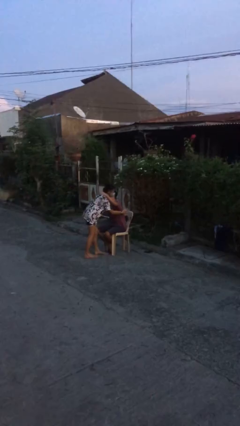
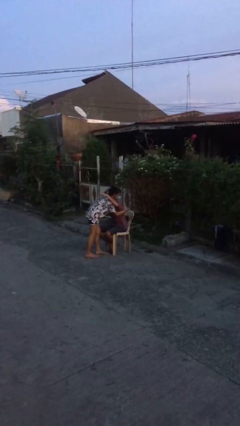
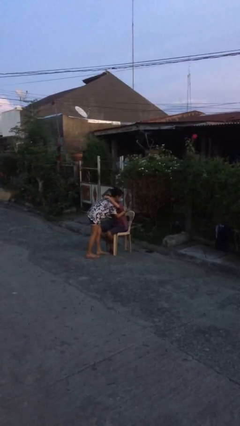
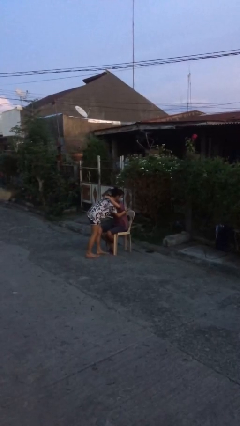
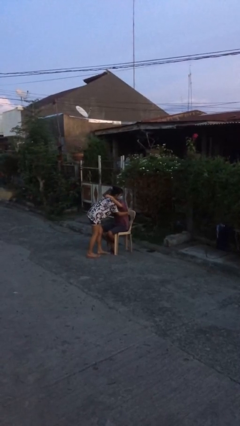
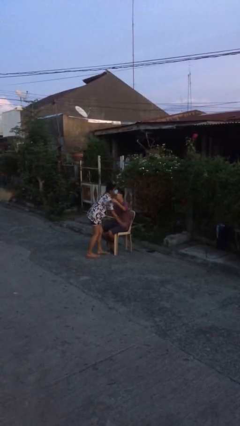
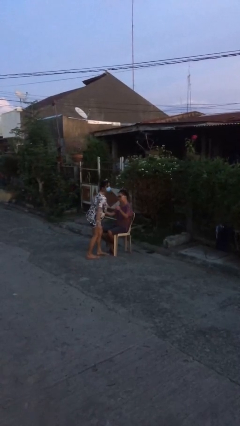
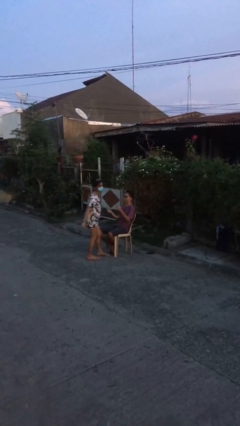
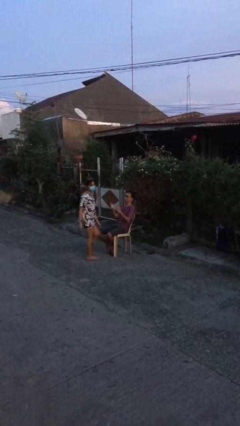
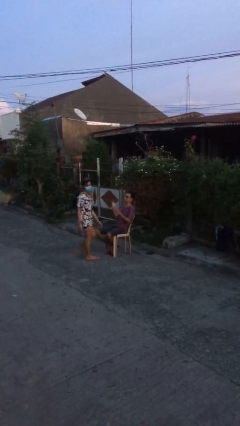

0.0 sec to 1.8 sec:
person embraces person

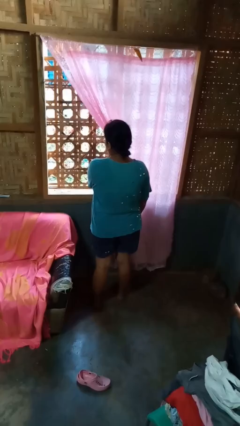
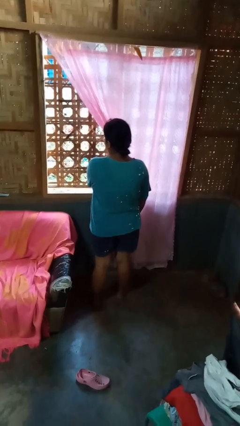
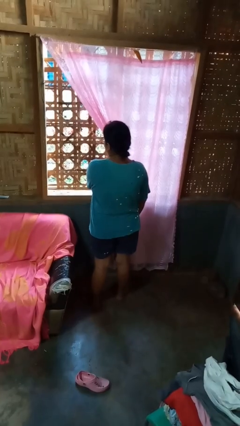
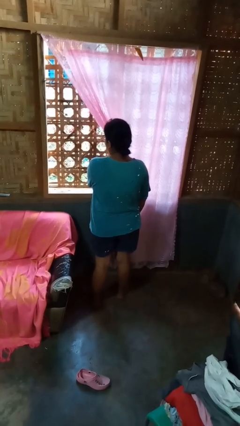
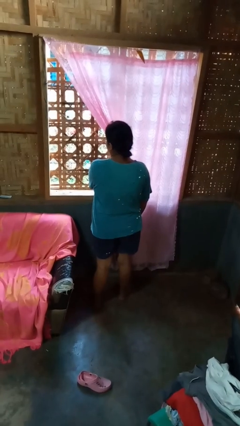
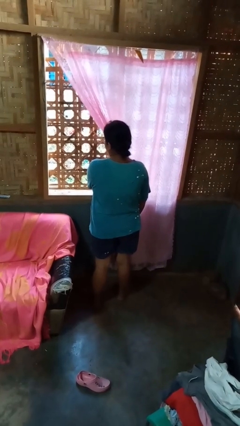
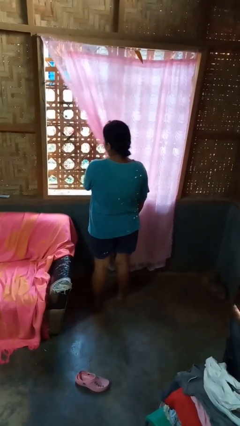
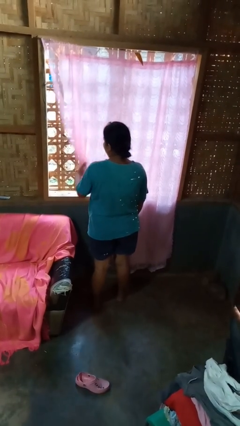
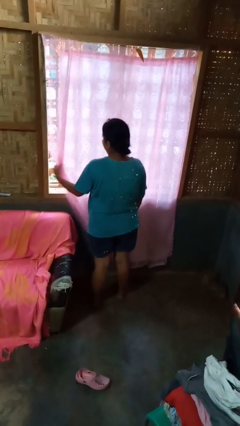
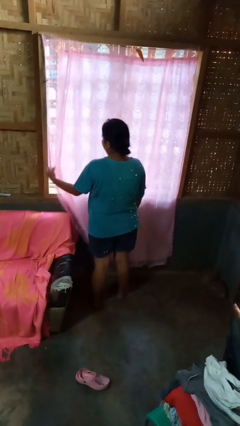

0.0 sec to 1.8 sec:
person closes curtains

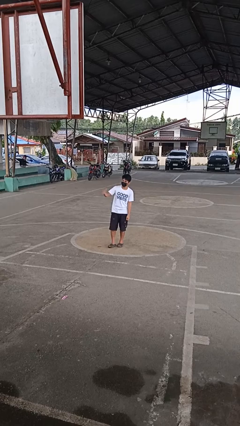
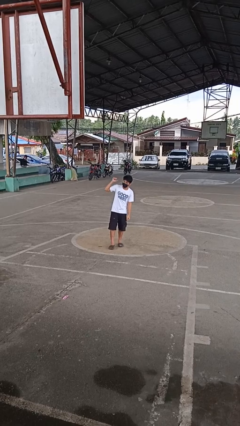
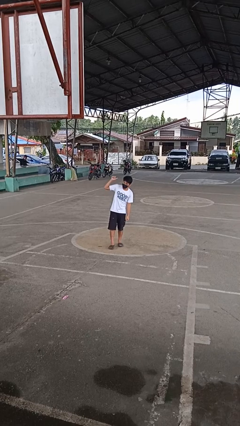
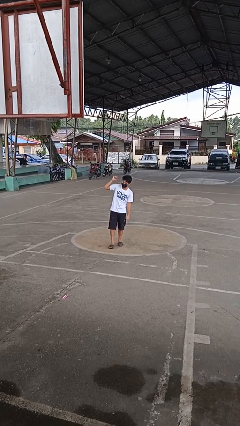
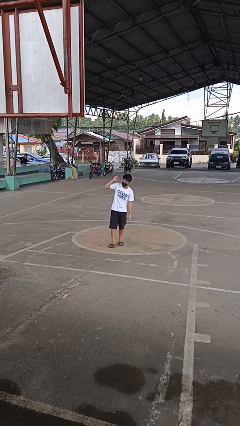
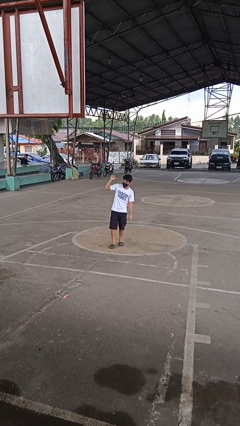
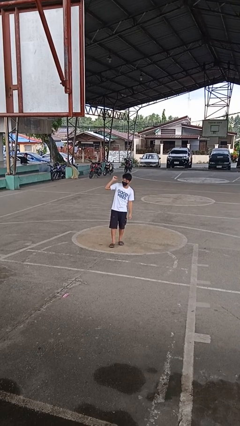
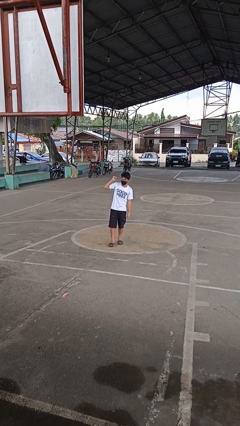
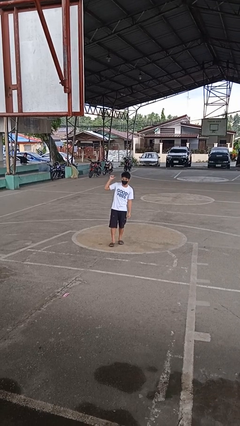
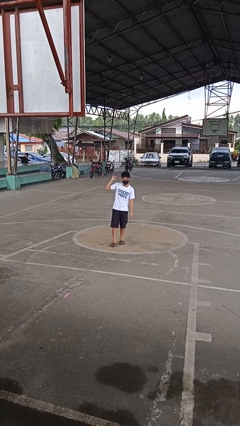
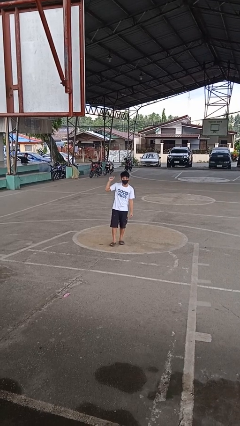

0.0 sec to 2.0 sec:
person gestures behind me

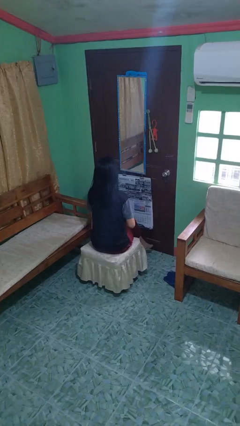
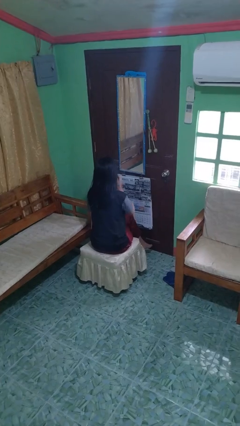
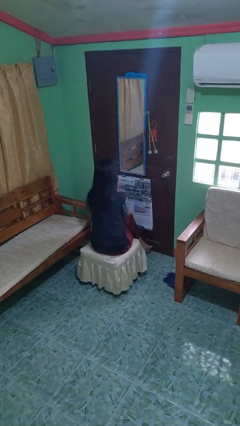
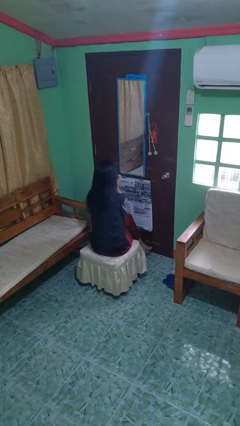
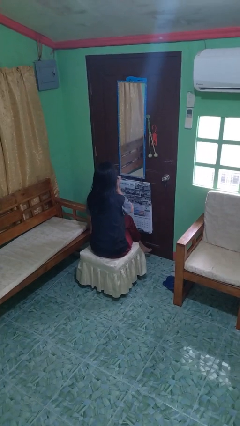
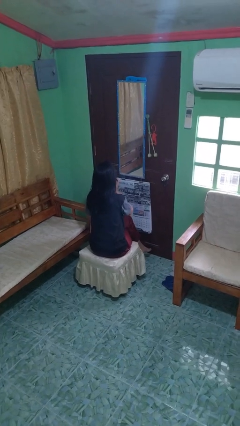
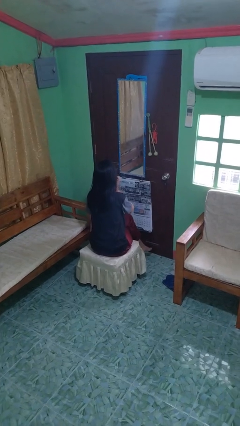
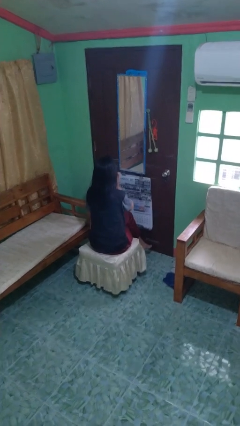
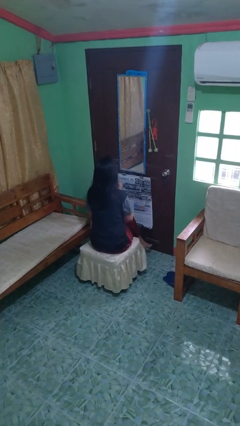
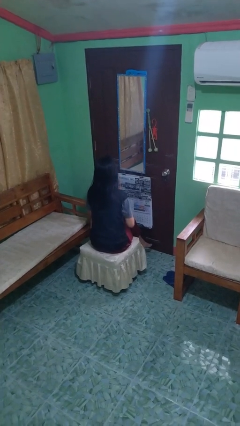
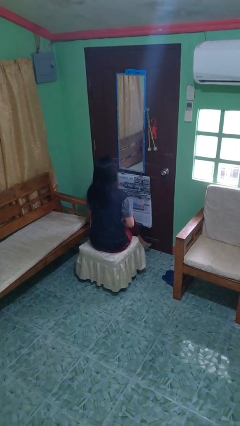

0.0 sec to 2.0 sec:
person scratches face

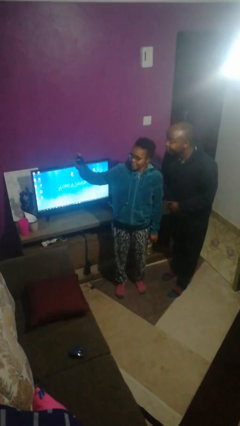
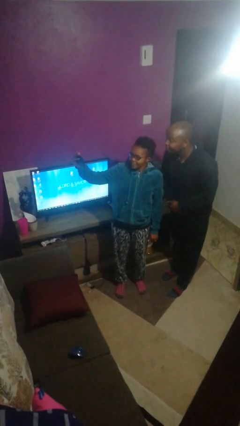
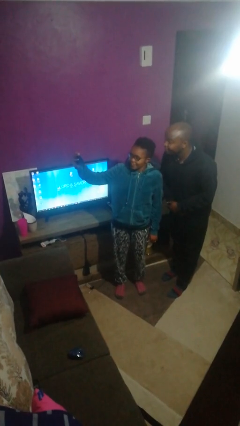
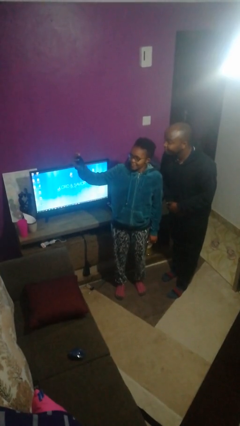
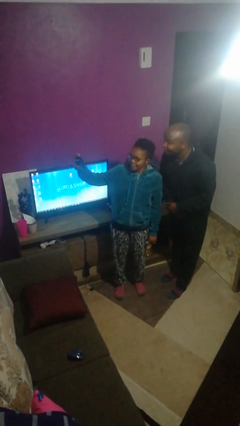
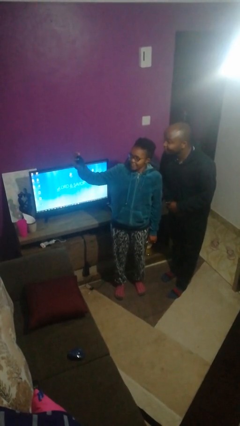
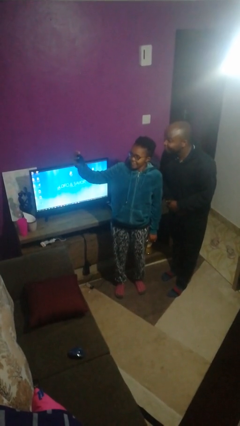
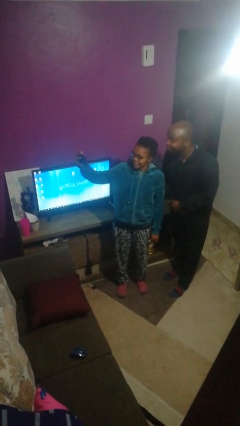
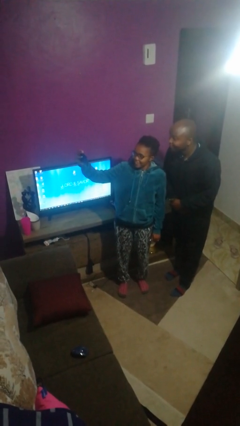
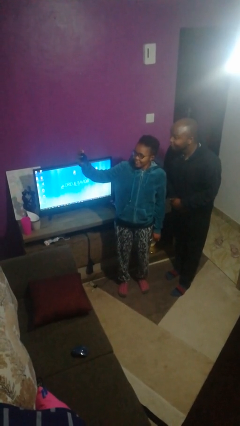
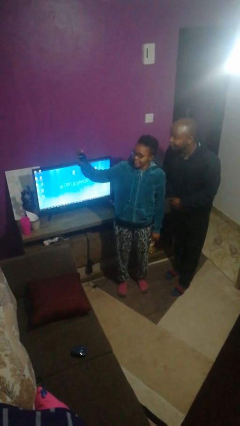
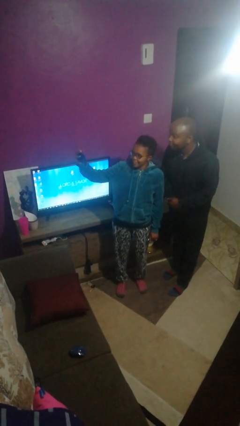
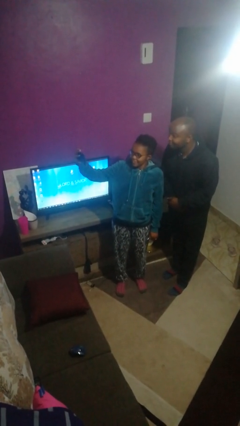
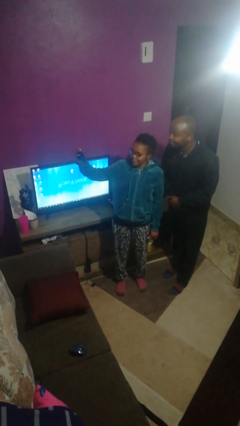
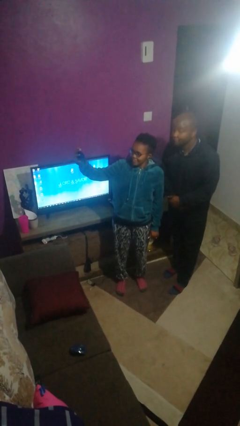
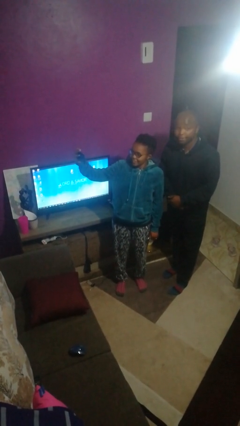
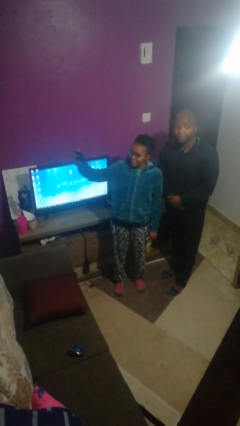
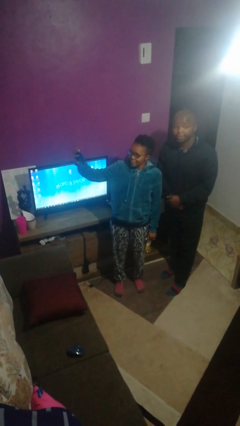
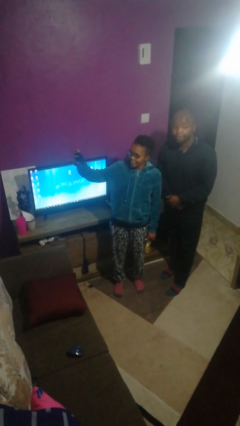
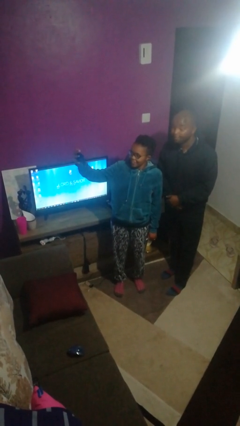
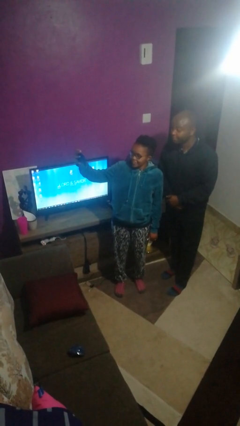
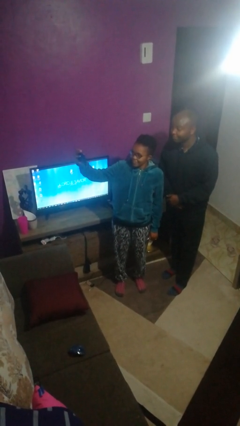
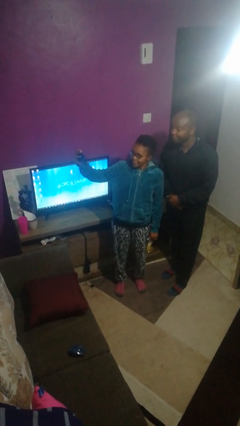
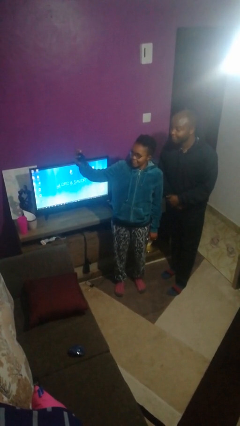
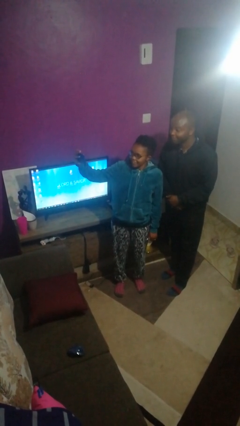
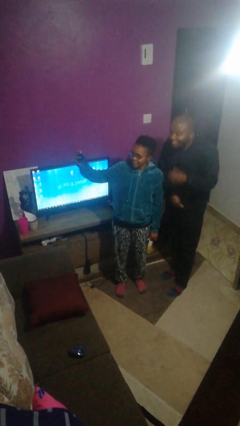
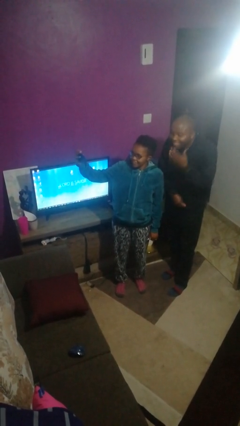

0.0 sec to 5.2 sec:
person takes selfie with person

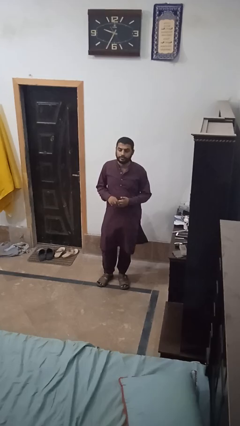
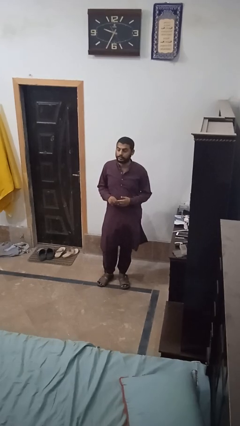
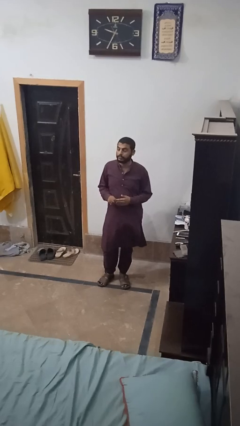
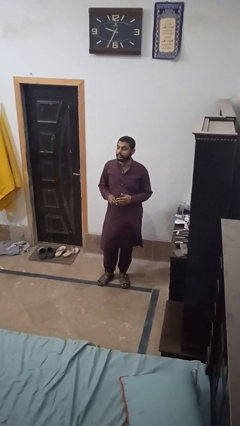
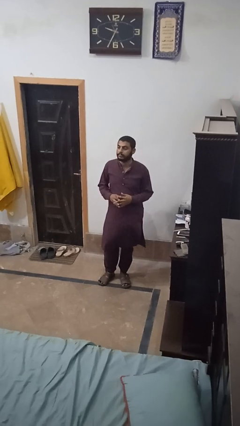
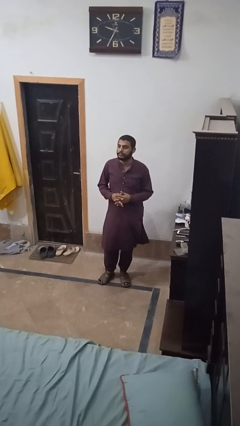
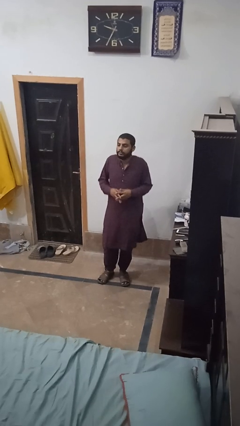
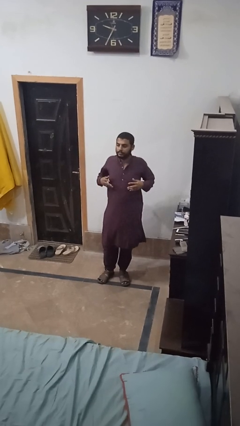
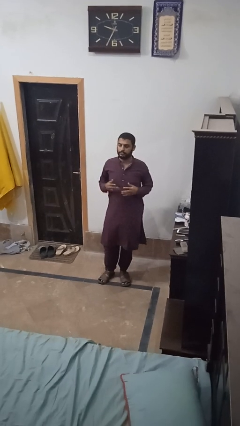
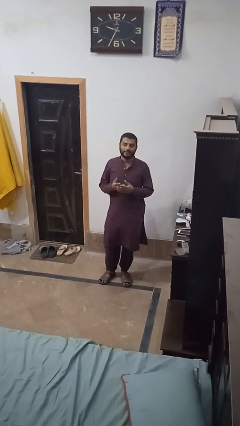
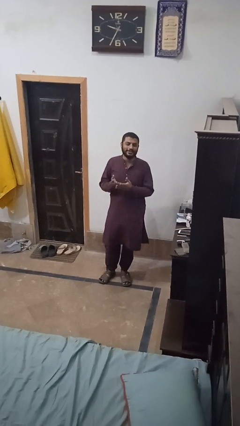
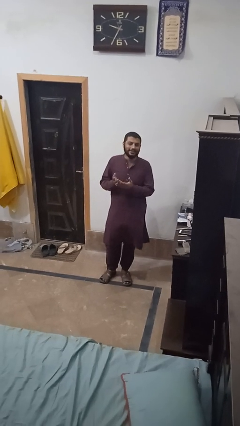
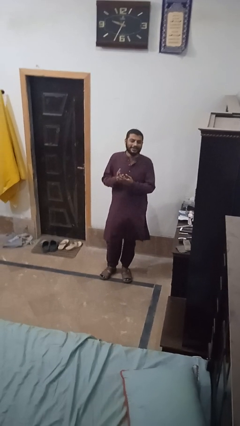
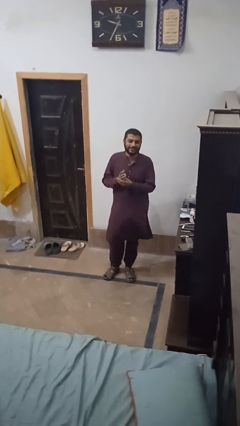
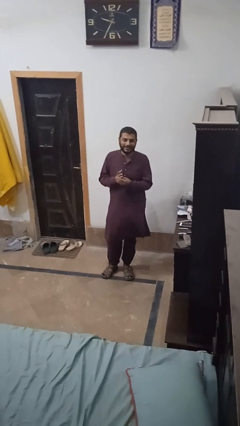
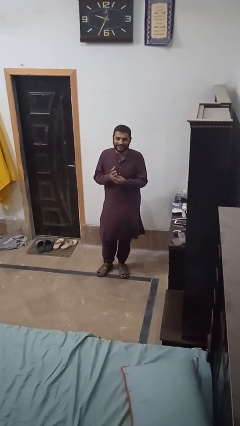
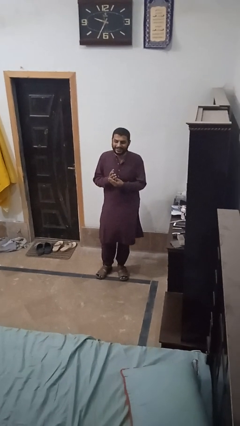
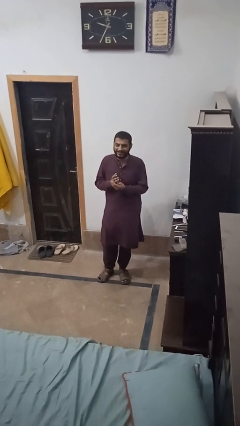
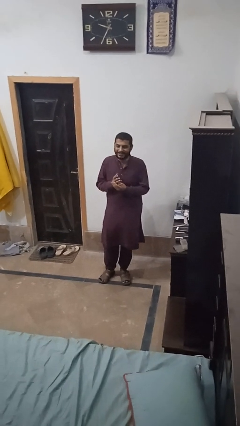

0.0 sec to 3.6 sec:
person shrugs

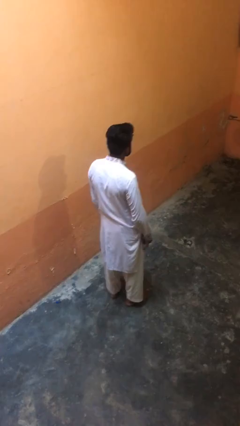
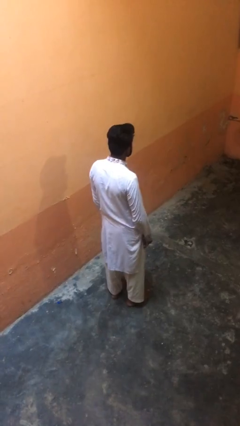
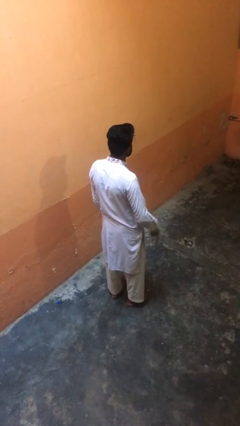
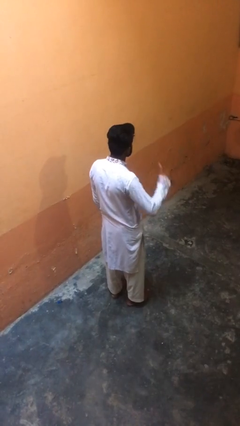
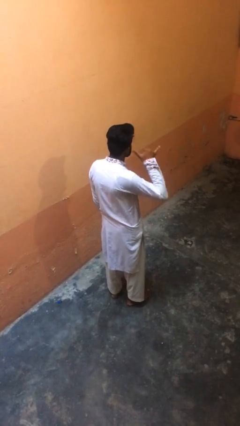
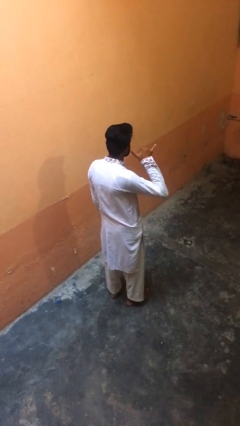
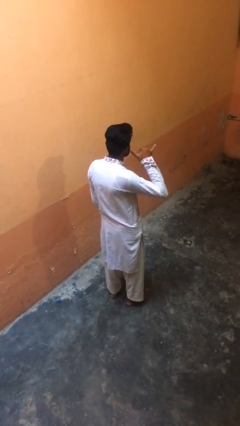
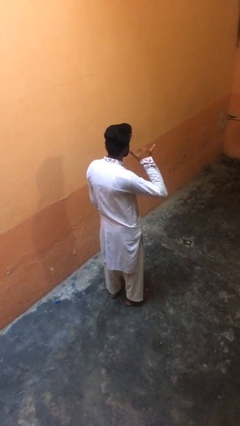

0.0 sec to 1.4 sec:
person gestures call me
